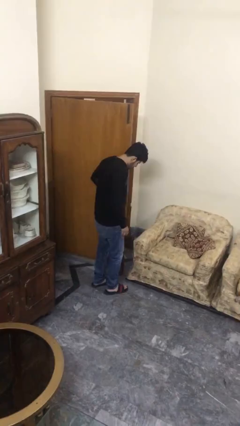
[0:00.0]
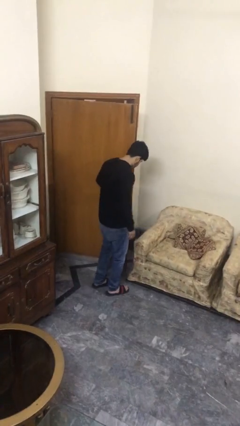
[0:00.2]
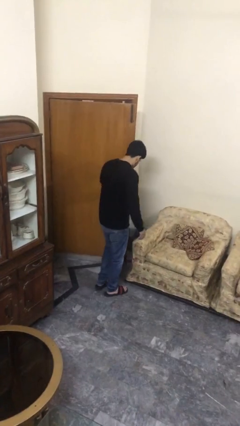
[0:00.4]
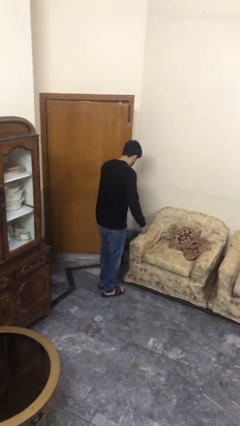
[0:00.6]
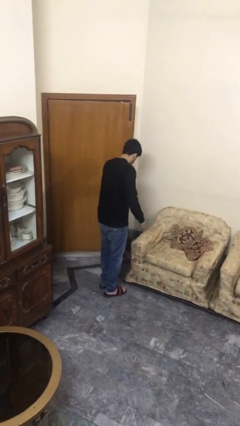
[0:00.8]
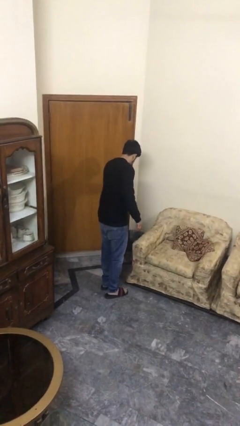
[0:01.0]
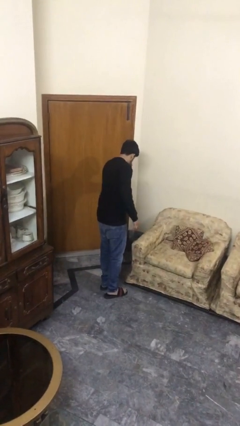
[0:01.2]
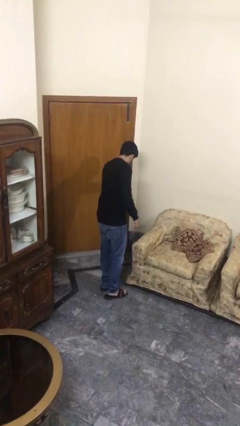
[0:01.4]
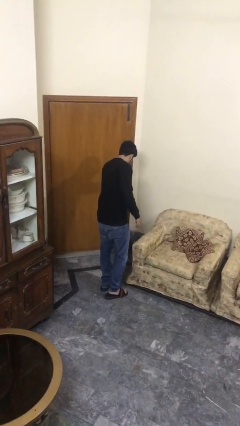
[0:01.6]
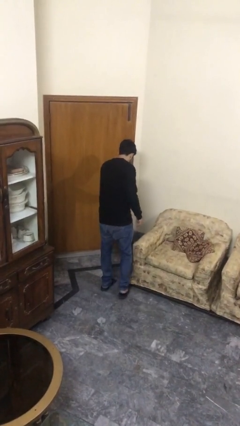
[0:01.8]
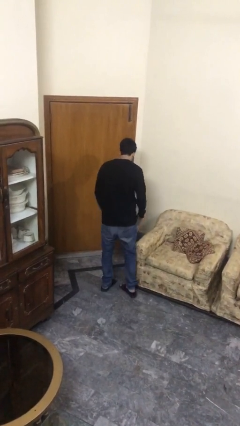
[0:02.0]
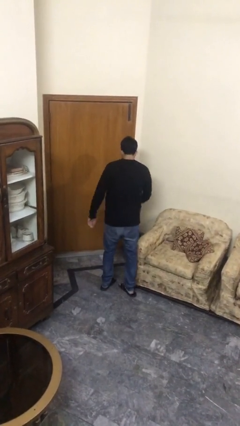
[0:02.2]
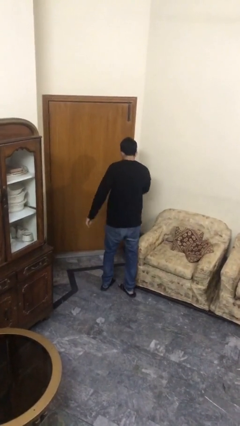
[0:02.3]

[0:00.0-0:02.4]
person closes facility door

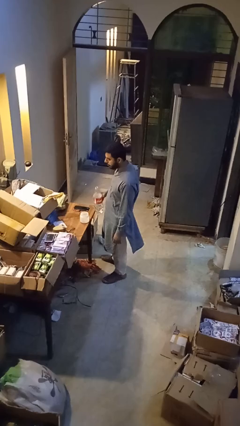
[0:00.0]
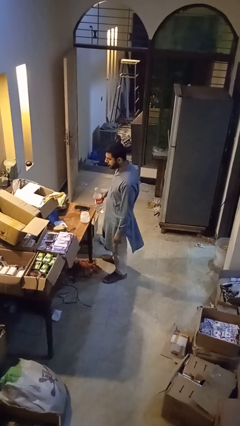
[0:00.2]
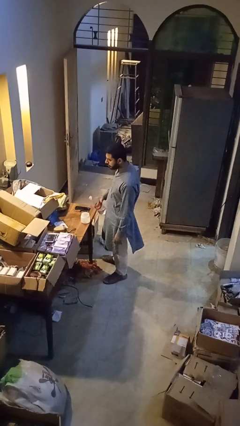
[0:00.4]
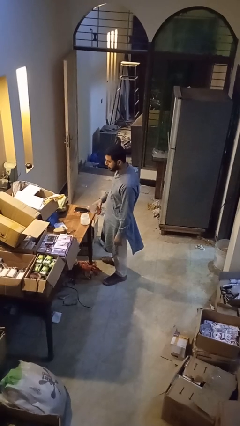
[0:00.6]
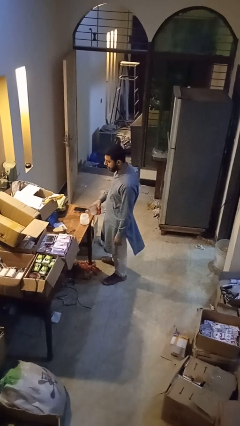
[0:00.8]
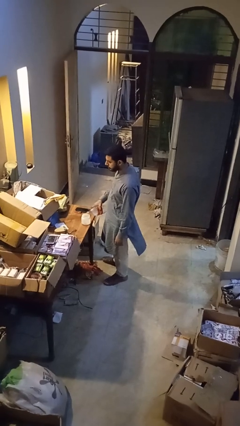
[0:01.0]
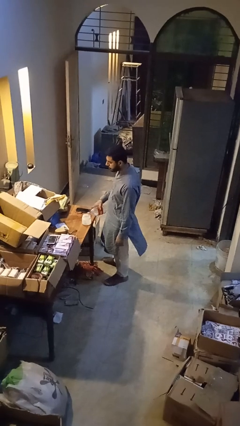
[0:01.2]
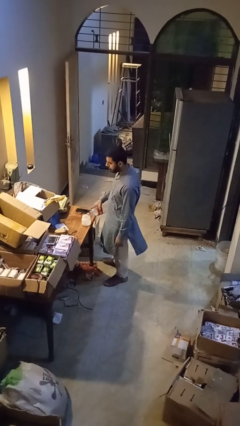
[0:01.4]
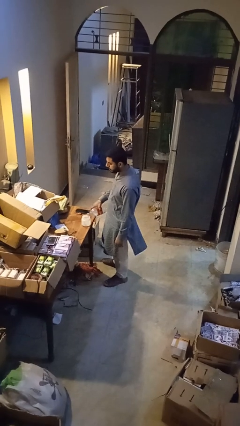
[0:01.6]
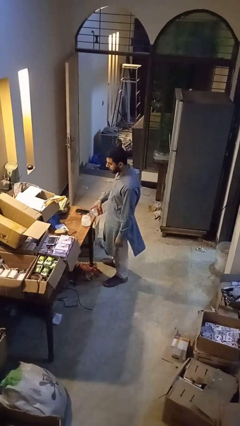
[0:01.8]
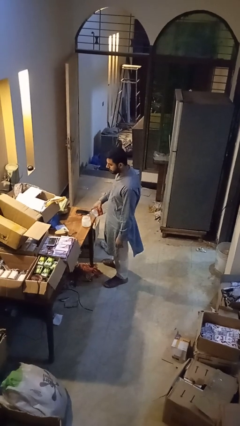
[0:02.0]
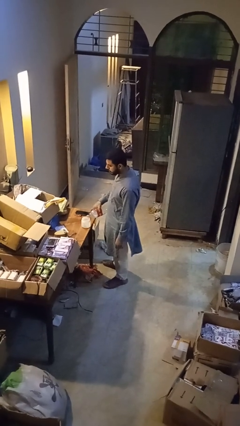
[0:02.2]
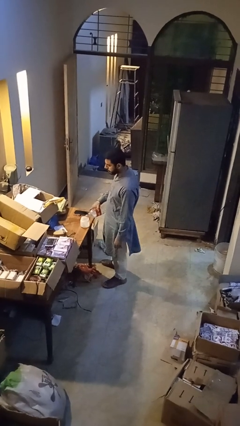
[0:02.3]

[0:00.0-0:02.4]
person pours liquid into cup

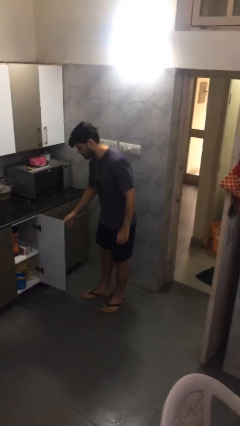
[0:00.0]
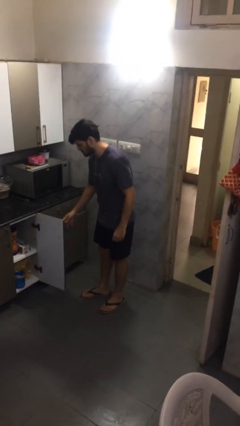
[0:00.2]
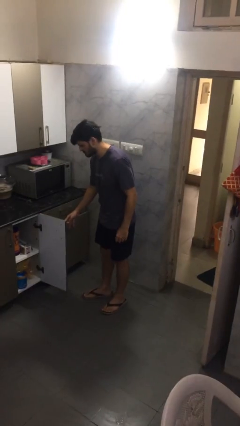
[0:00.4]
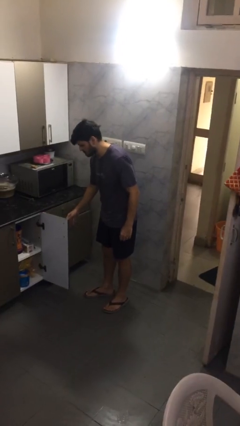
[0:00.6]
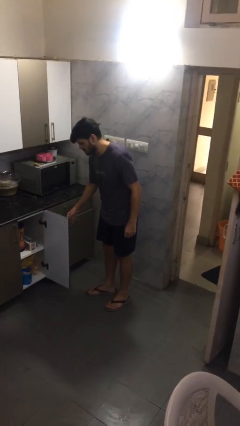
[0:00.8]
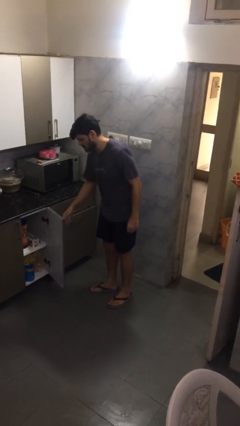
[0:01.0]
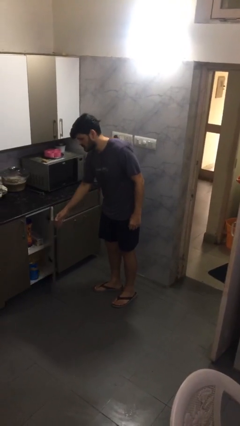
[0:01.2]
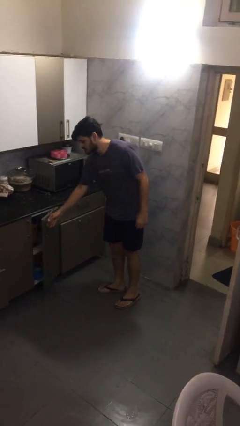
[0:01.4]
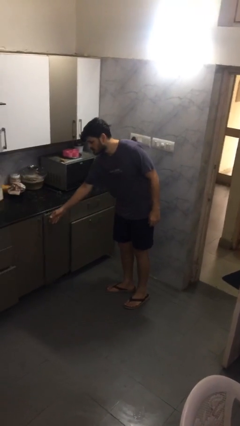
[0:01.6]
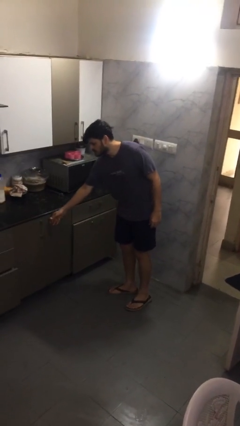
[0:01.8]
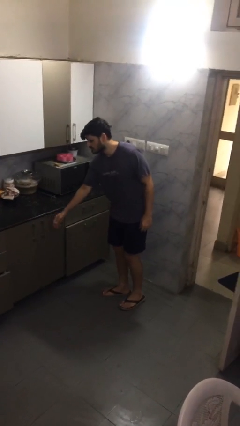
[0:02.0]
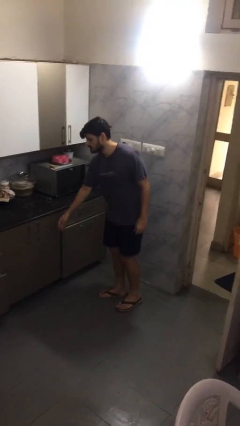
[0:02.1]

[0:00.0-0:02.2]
person closes cabinet

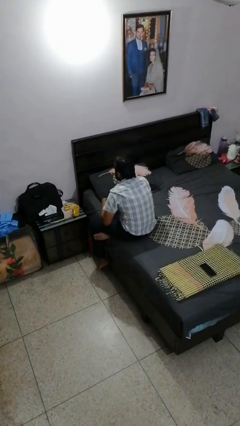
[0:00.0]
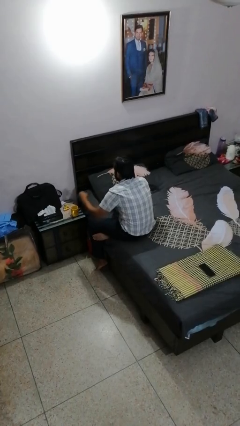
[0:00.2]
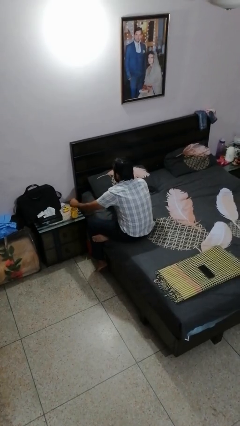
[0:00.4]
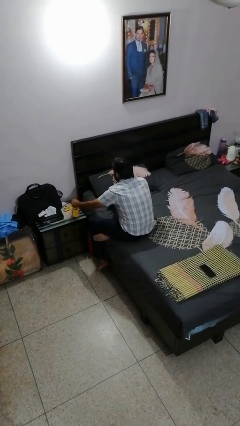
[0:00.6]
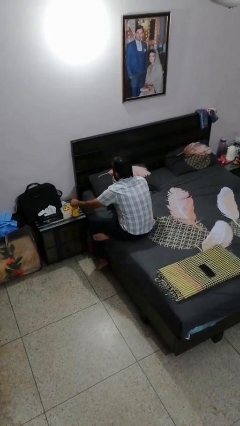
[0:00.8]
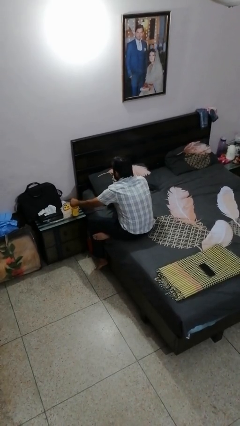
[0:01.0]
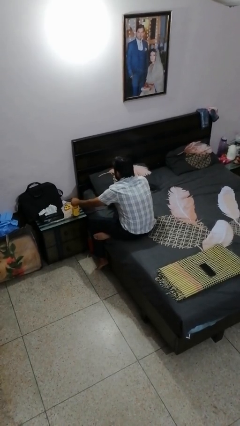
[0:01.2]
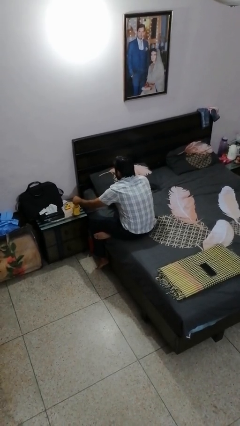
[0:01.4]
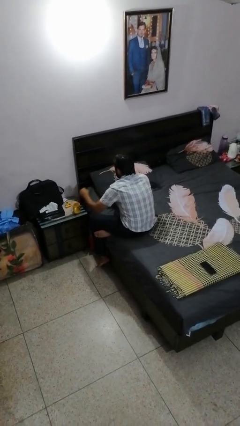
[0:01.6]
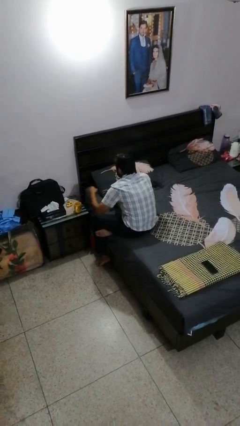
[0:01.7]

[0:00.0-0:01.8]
person stirs mug

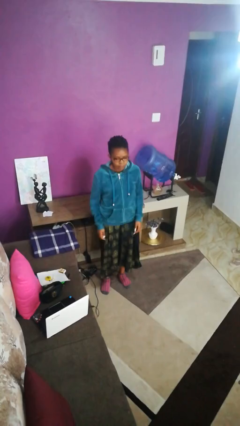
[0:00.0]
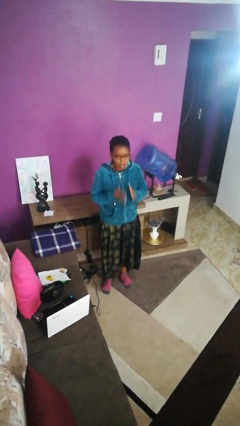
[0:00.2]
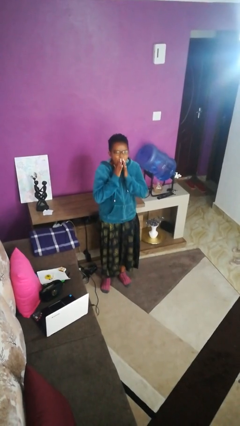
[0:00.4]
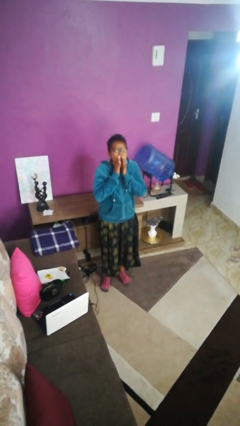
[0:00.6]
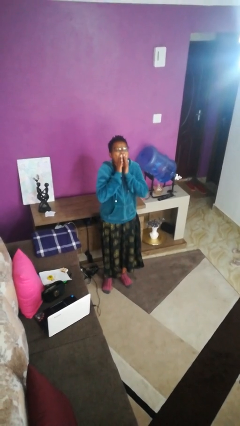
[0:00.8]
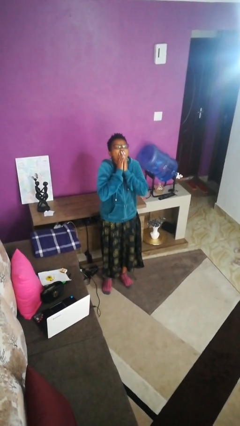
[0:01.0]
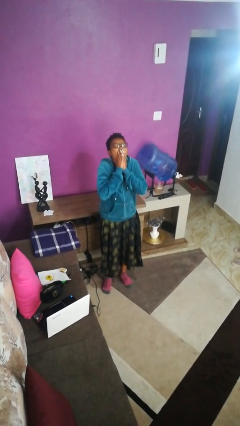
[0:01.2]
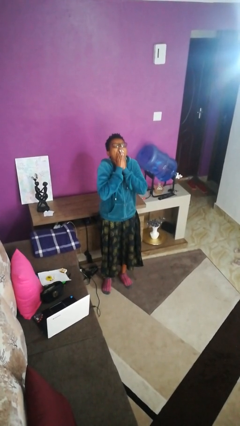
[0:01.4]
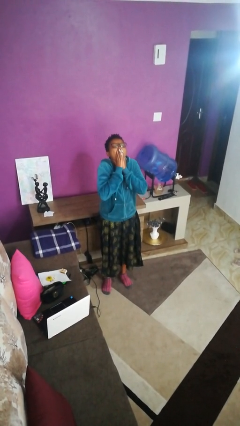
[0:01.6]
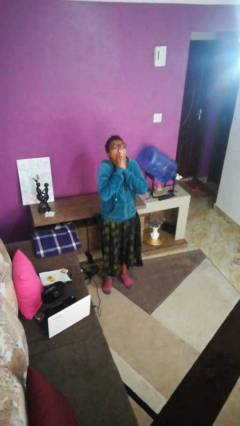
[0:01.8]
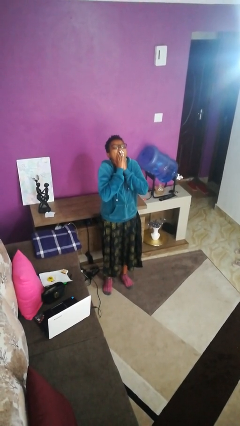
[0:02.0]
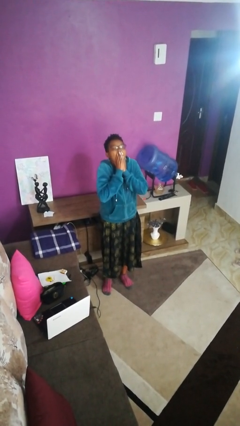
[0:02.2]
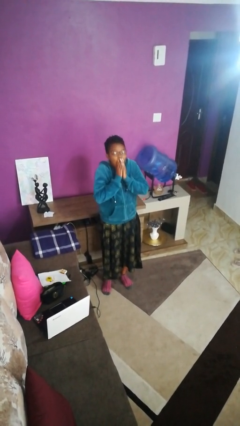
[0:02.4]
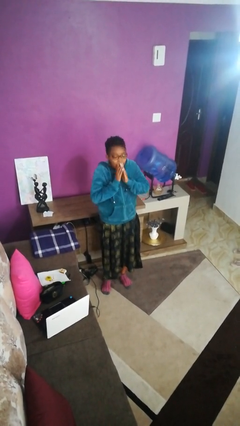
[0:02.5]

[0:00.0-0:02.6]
person yawns

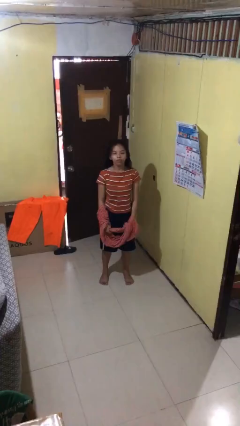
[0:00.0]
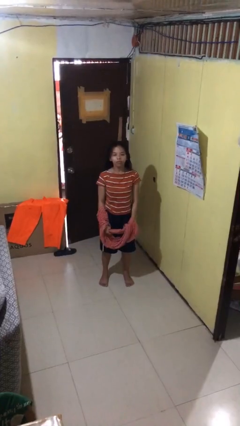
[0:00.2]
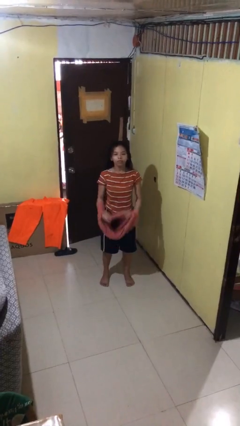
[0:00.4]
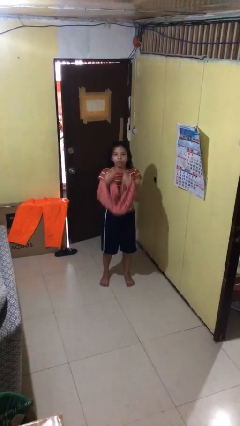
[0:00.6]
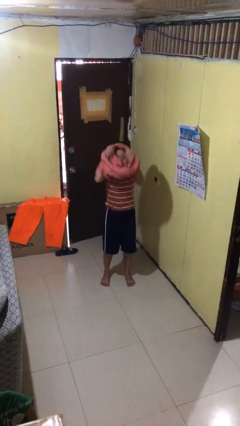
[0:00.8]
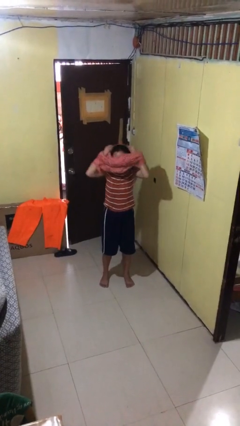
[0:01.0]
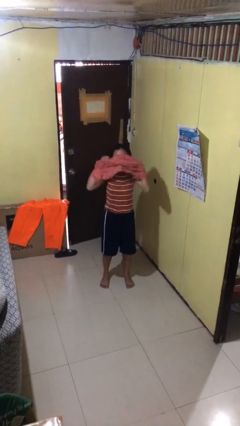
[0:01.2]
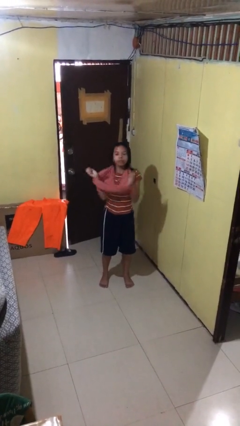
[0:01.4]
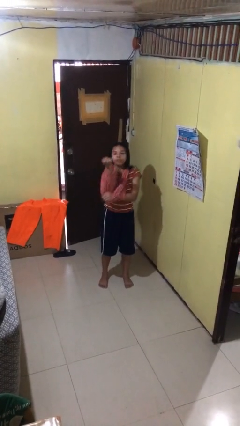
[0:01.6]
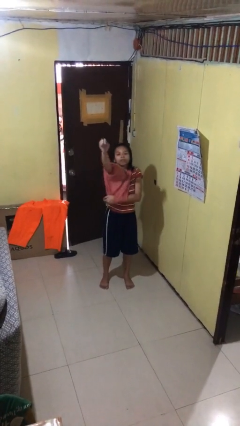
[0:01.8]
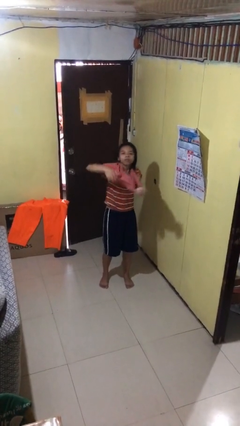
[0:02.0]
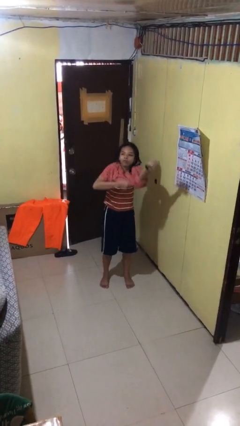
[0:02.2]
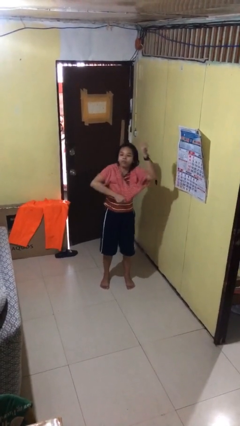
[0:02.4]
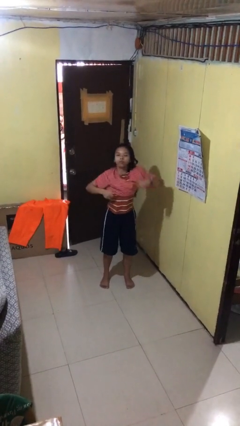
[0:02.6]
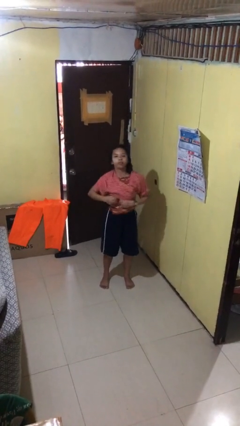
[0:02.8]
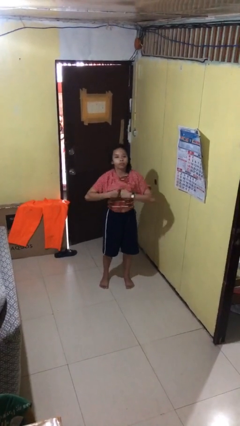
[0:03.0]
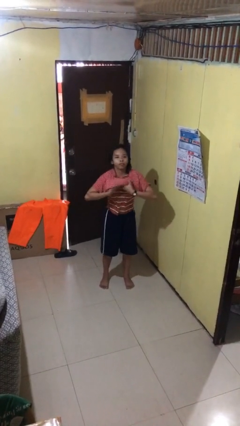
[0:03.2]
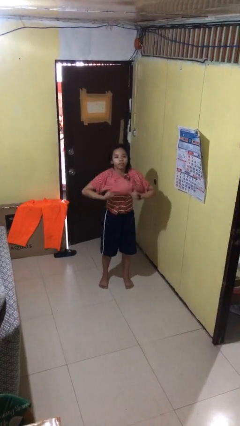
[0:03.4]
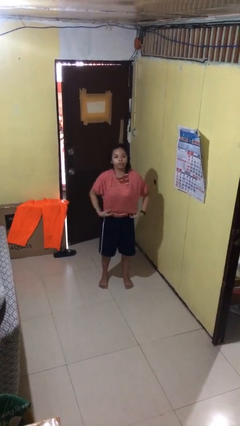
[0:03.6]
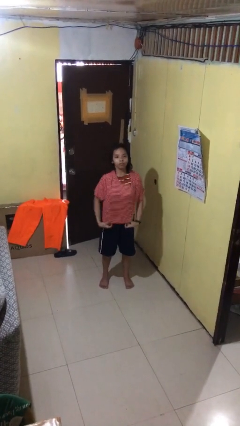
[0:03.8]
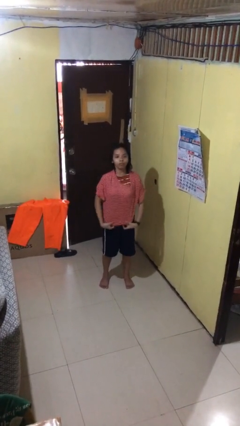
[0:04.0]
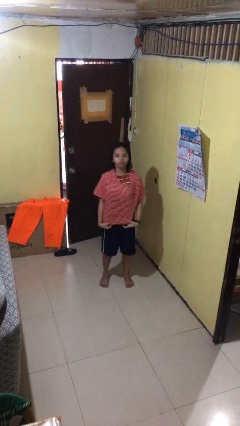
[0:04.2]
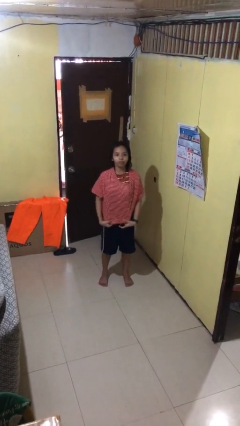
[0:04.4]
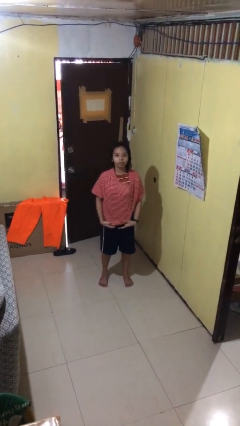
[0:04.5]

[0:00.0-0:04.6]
person puts on shirt

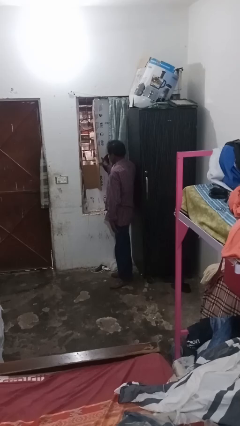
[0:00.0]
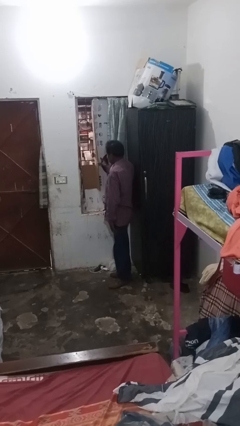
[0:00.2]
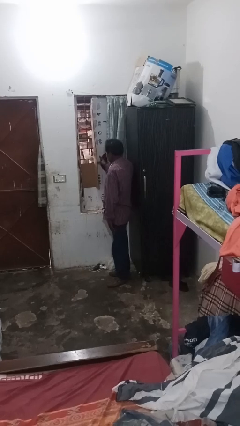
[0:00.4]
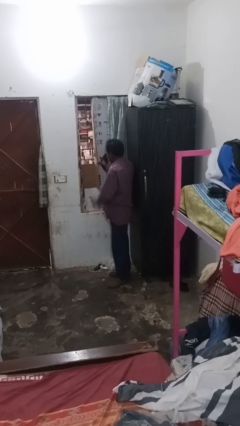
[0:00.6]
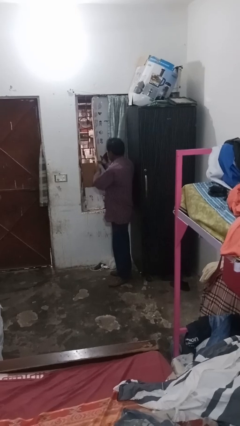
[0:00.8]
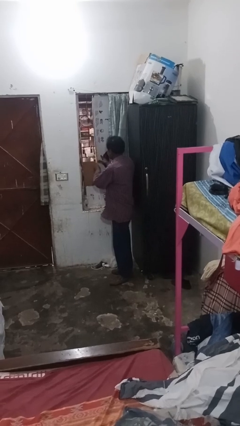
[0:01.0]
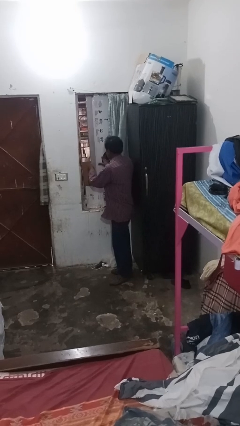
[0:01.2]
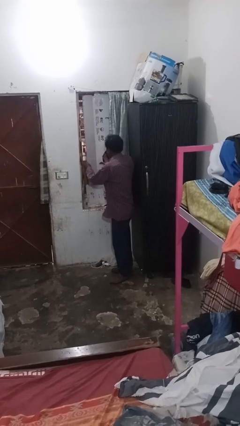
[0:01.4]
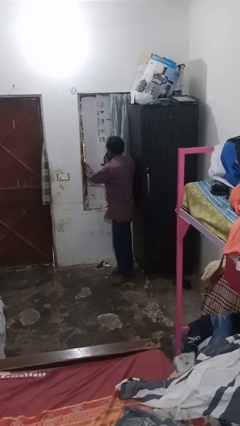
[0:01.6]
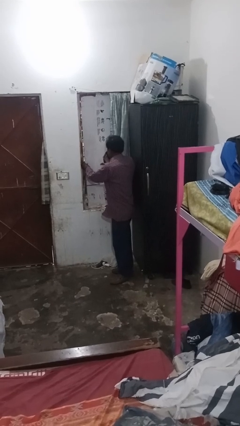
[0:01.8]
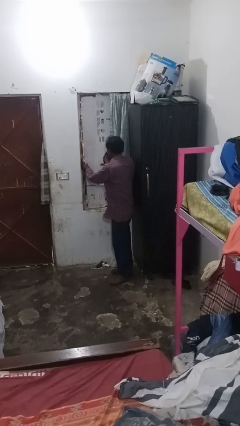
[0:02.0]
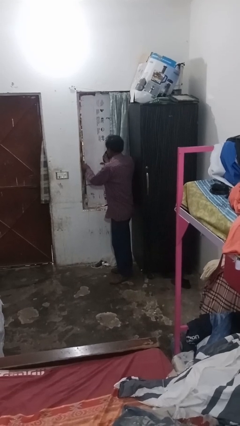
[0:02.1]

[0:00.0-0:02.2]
person closes home window
